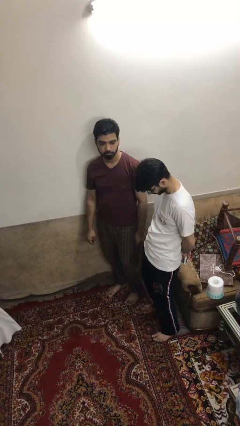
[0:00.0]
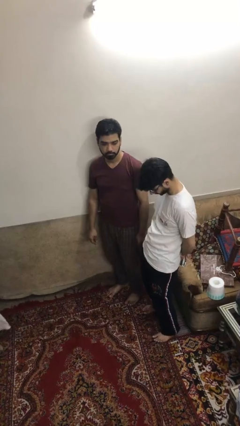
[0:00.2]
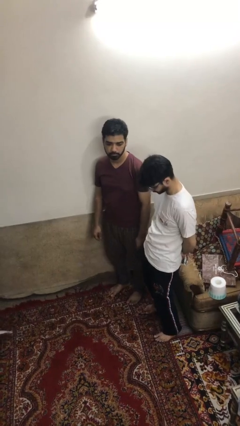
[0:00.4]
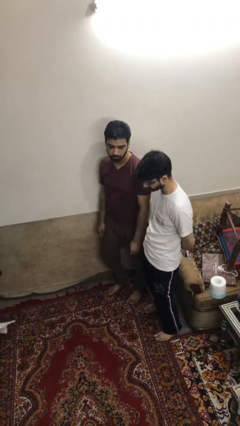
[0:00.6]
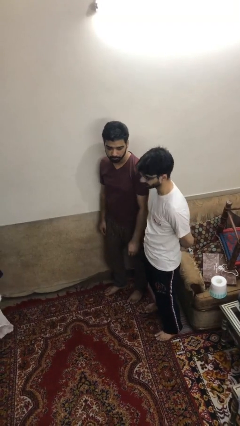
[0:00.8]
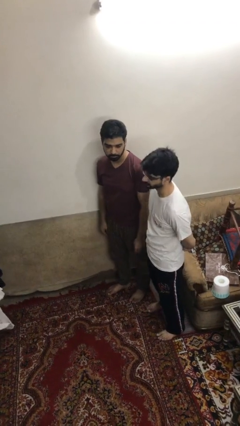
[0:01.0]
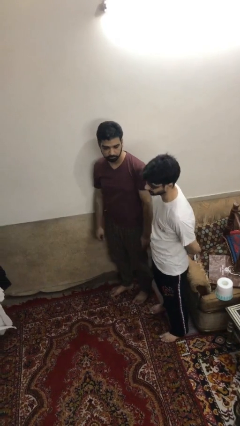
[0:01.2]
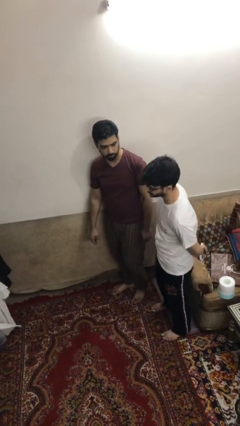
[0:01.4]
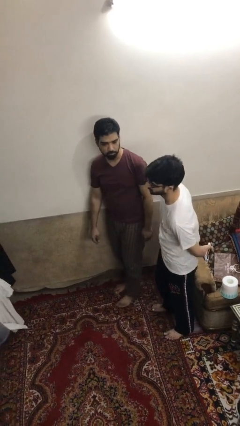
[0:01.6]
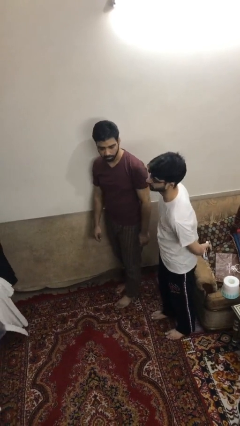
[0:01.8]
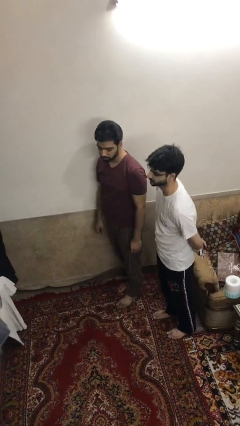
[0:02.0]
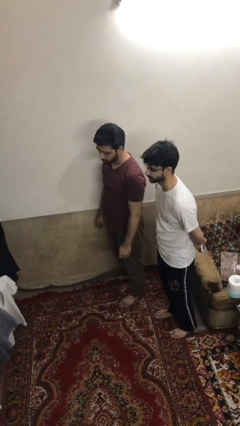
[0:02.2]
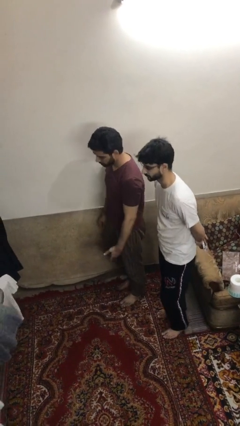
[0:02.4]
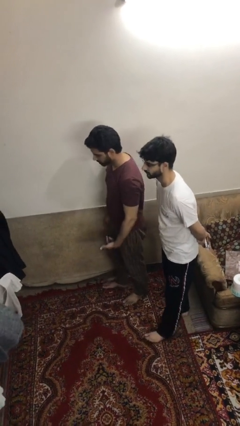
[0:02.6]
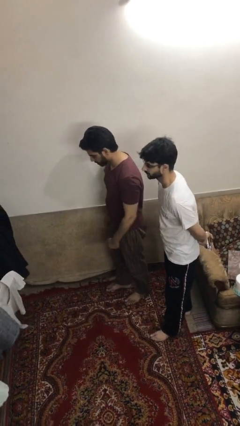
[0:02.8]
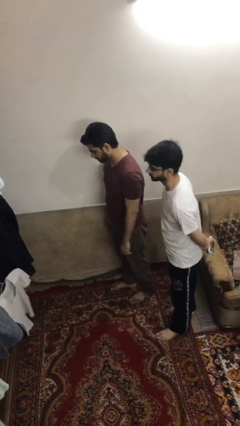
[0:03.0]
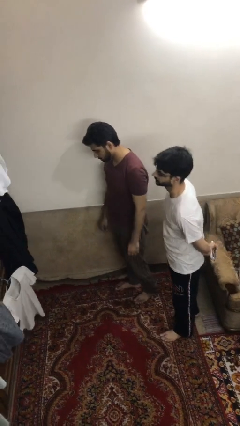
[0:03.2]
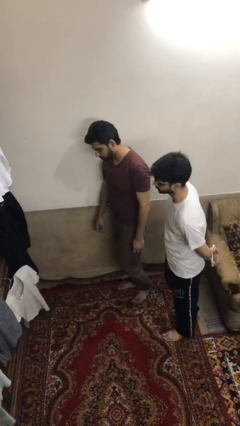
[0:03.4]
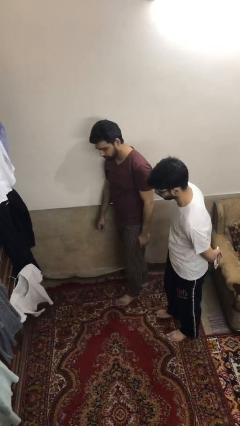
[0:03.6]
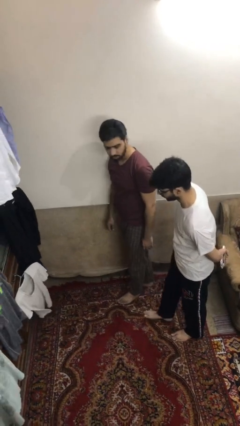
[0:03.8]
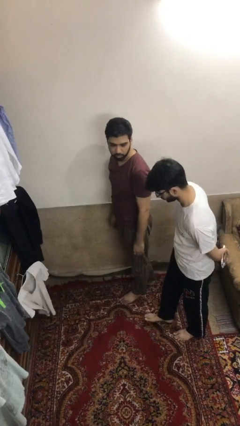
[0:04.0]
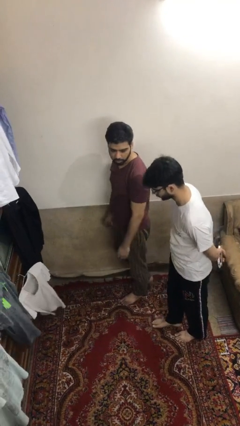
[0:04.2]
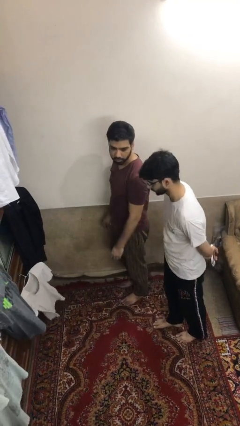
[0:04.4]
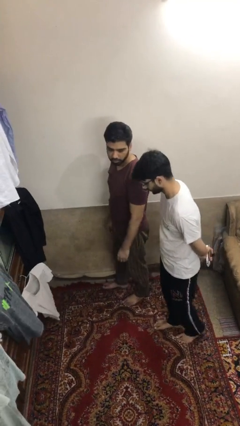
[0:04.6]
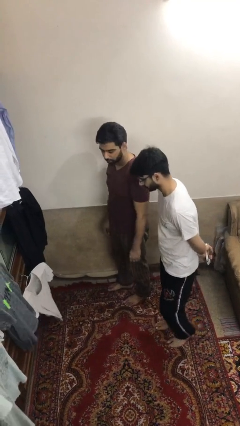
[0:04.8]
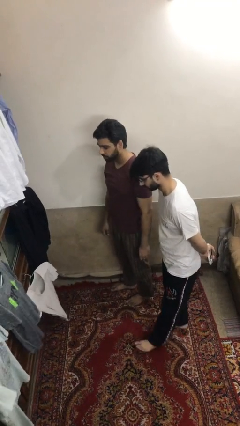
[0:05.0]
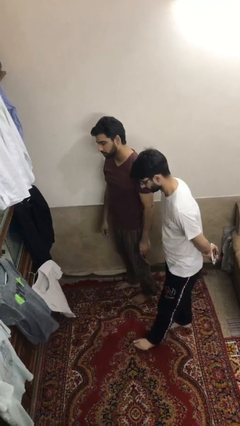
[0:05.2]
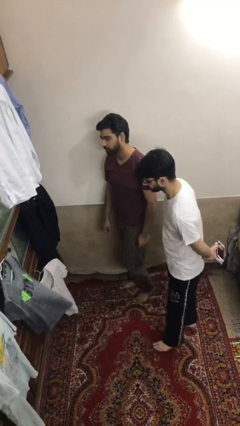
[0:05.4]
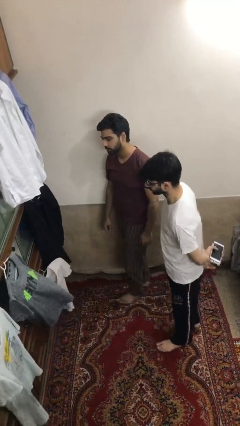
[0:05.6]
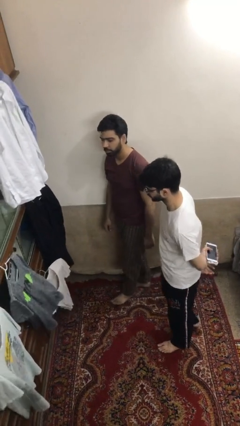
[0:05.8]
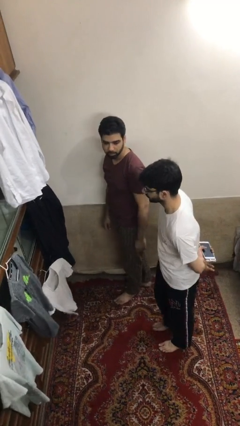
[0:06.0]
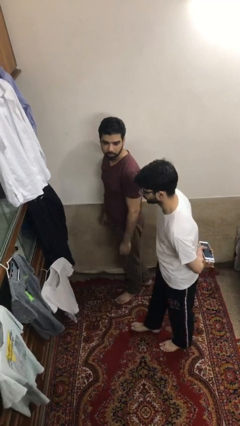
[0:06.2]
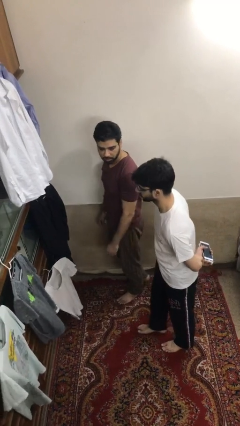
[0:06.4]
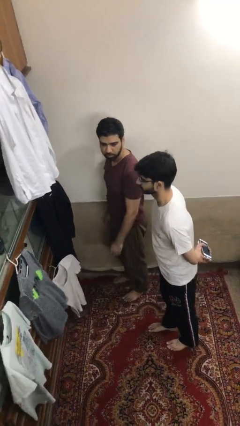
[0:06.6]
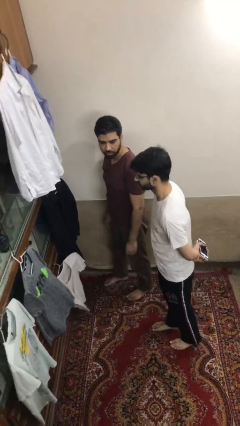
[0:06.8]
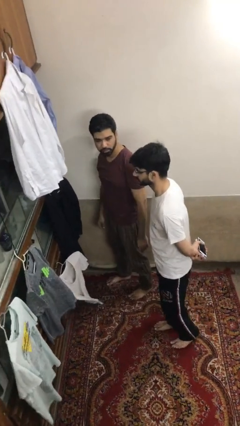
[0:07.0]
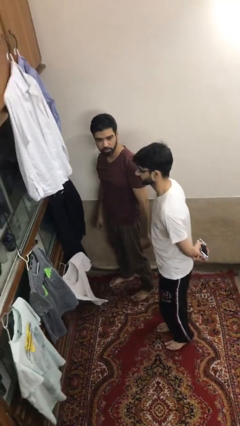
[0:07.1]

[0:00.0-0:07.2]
person talks to person

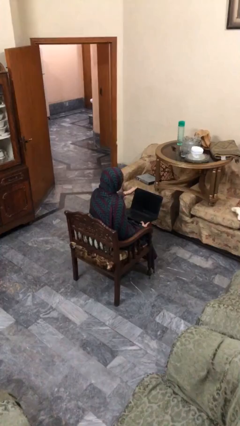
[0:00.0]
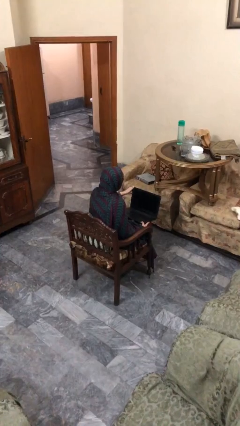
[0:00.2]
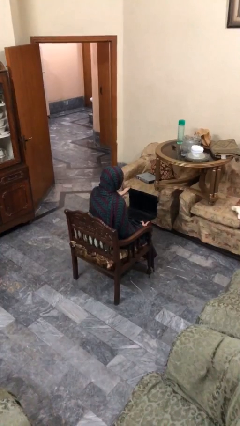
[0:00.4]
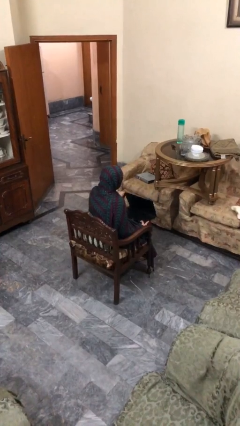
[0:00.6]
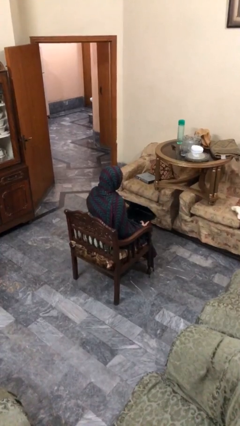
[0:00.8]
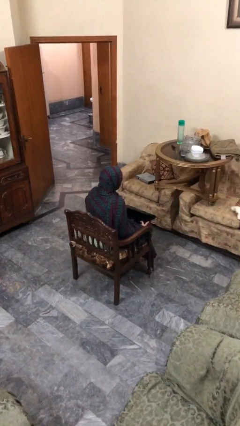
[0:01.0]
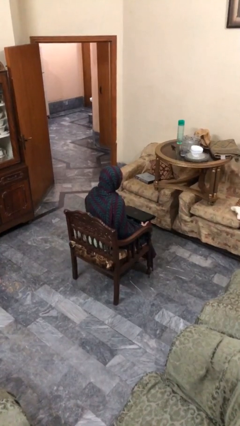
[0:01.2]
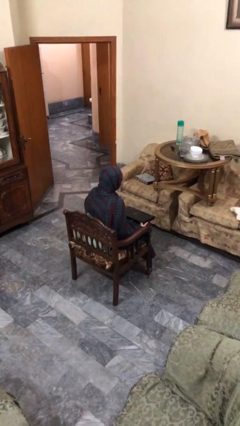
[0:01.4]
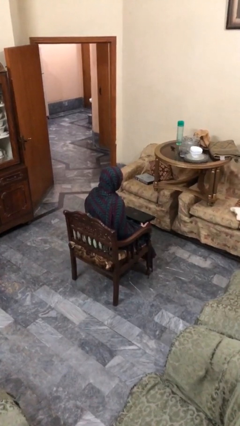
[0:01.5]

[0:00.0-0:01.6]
person closes laptop

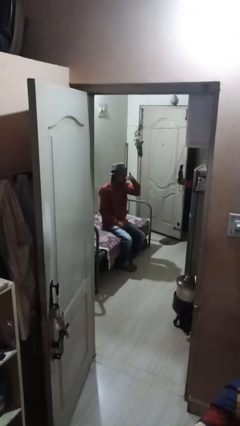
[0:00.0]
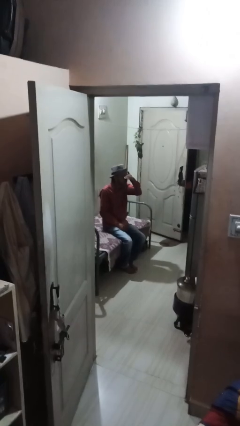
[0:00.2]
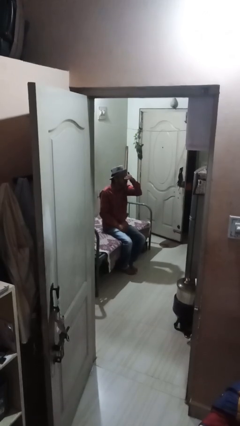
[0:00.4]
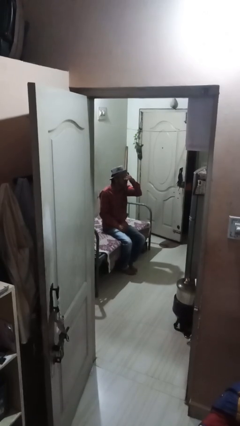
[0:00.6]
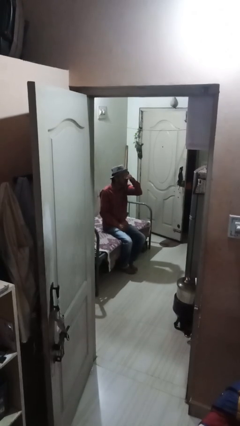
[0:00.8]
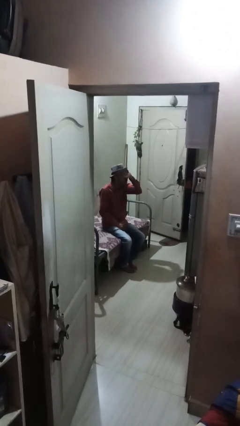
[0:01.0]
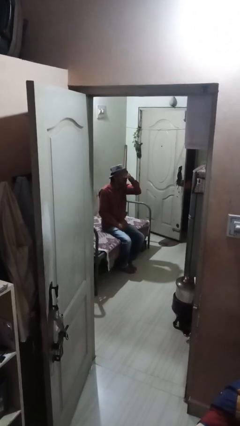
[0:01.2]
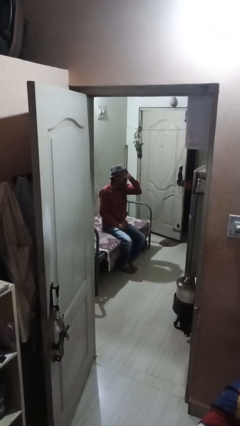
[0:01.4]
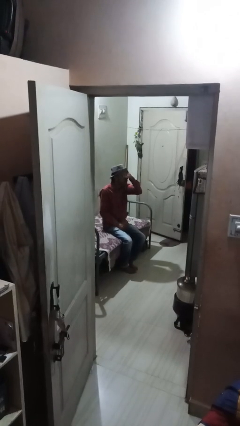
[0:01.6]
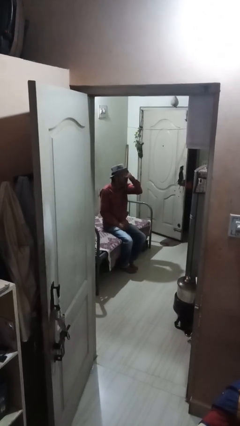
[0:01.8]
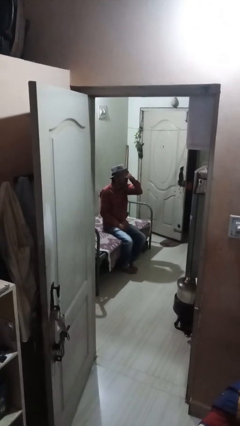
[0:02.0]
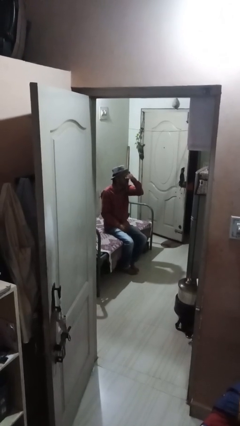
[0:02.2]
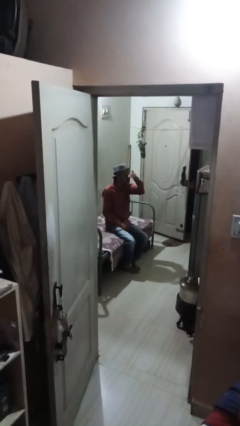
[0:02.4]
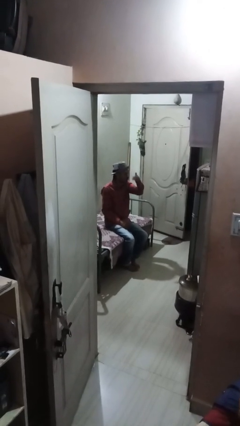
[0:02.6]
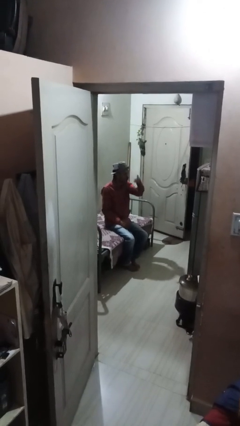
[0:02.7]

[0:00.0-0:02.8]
person shades eyes

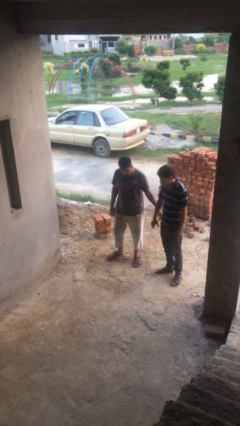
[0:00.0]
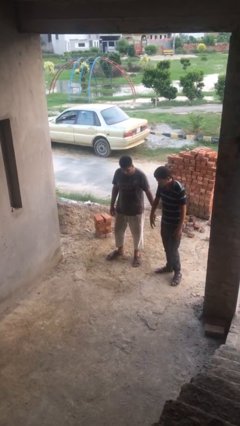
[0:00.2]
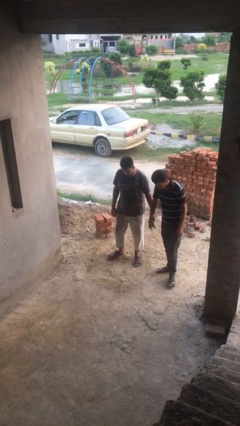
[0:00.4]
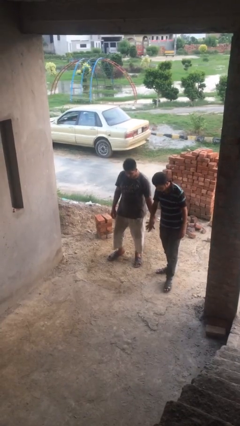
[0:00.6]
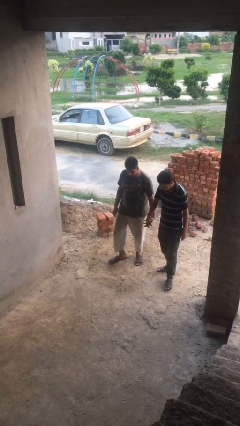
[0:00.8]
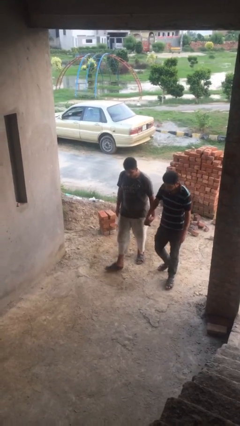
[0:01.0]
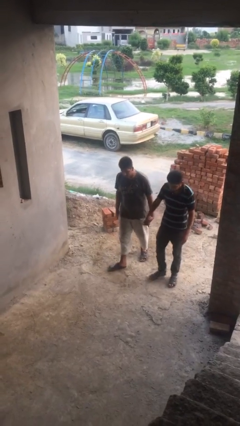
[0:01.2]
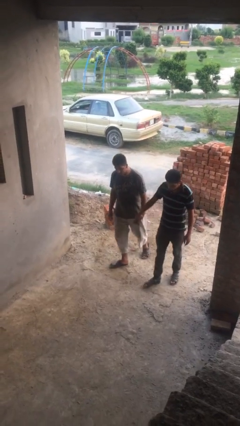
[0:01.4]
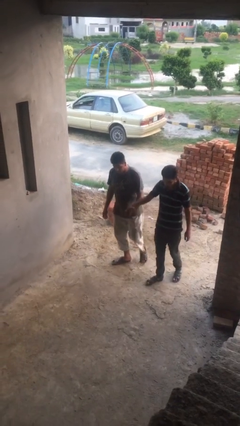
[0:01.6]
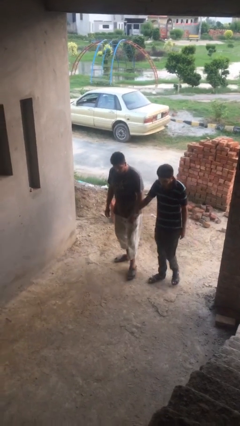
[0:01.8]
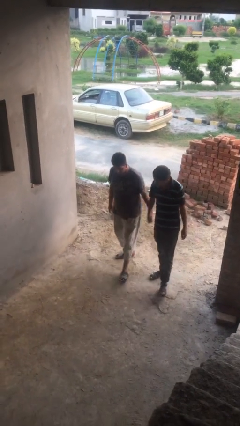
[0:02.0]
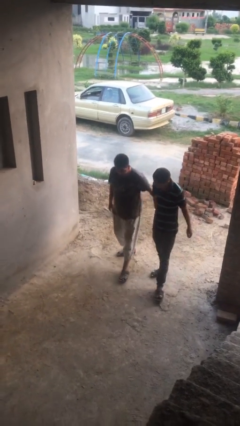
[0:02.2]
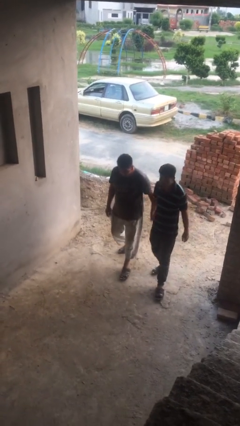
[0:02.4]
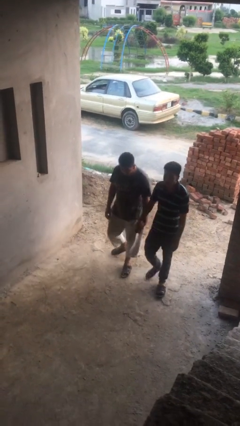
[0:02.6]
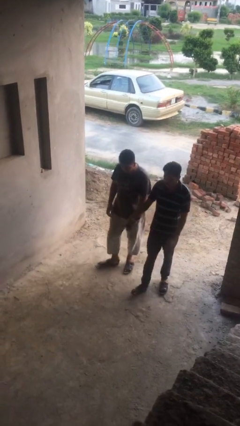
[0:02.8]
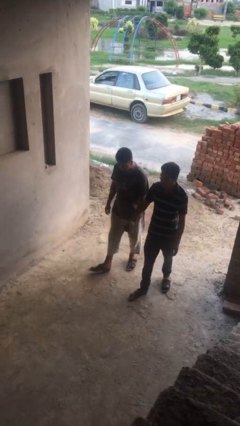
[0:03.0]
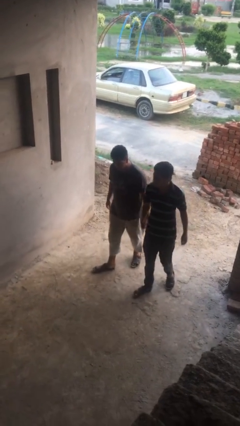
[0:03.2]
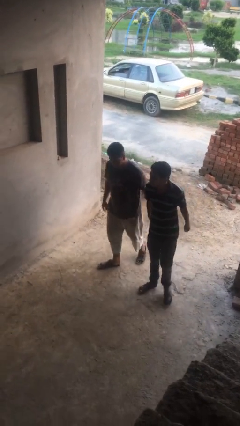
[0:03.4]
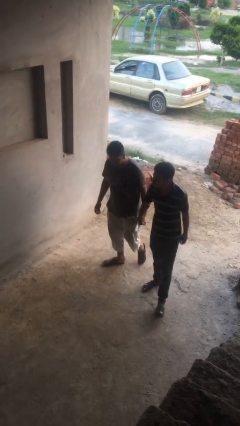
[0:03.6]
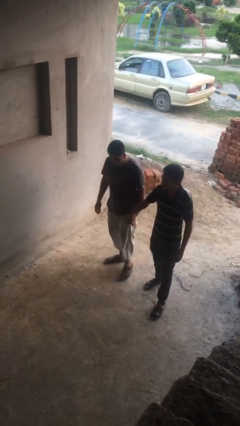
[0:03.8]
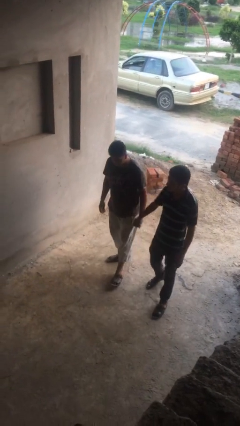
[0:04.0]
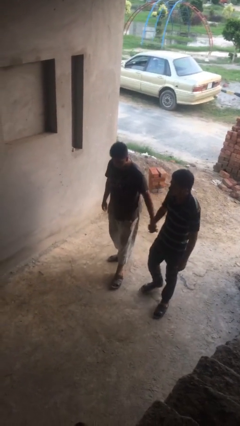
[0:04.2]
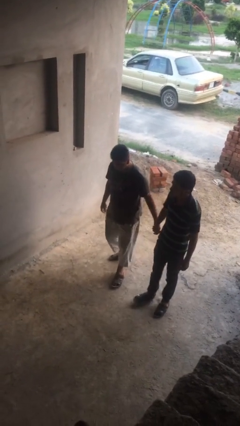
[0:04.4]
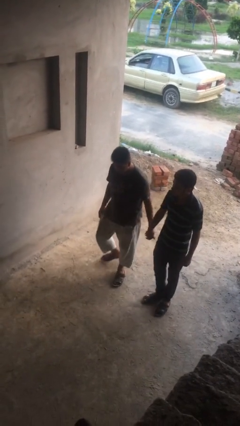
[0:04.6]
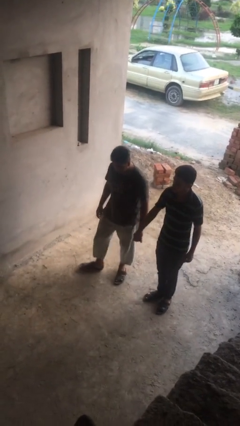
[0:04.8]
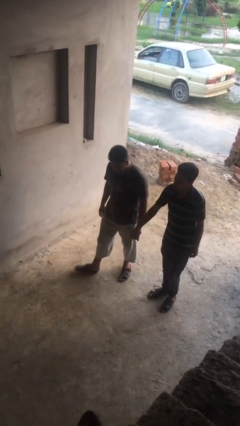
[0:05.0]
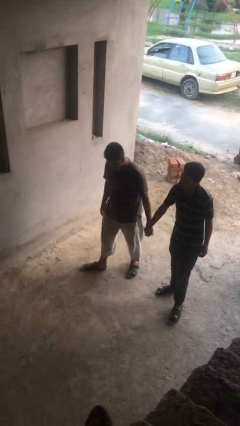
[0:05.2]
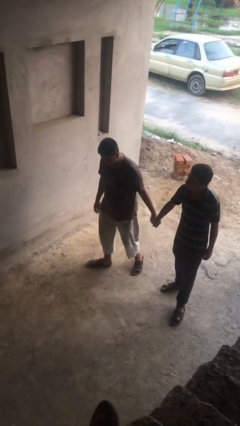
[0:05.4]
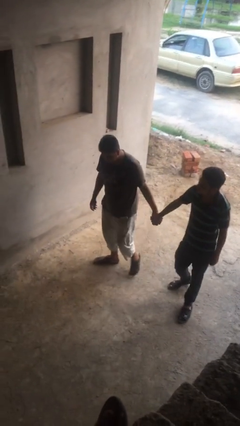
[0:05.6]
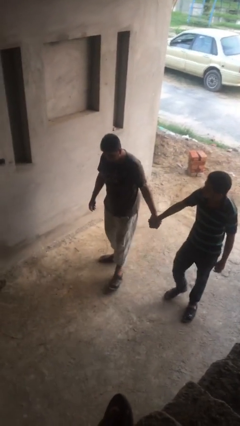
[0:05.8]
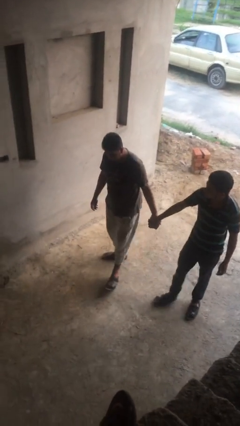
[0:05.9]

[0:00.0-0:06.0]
person holds hand

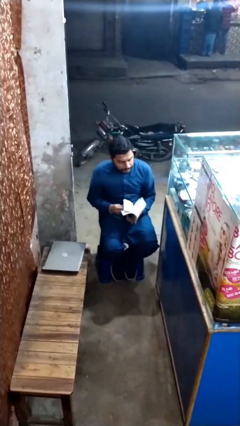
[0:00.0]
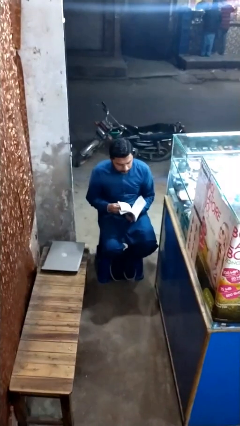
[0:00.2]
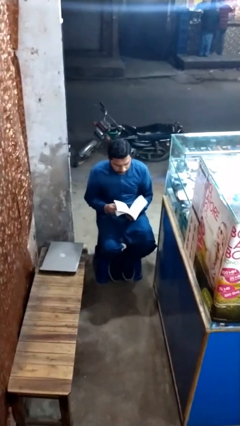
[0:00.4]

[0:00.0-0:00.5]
person reads document
